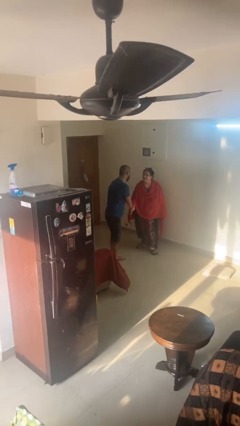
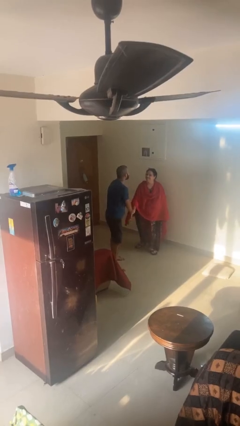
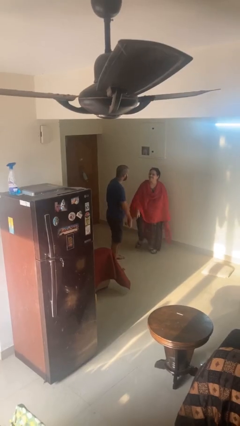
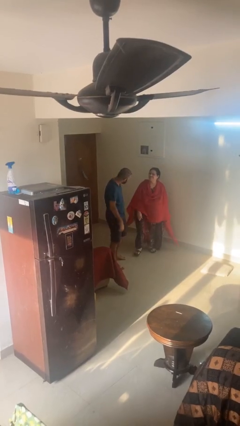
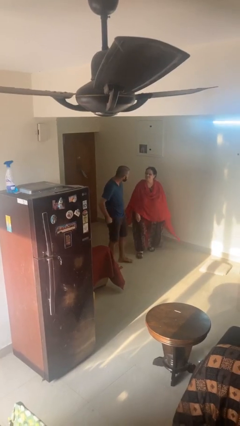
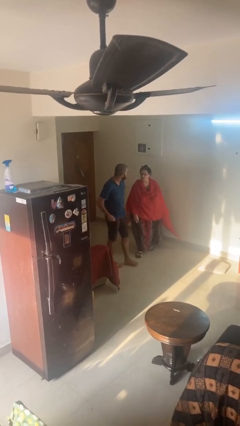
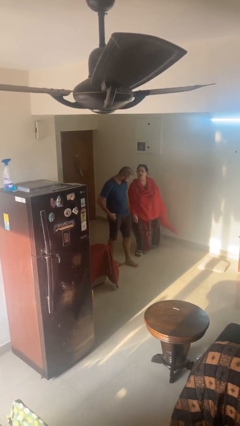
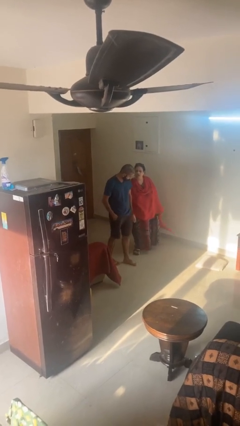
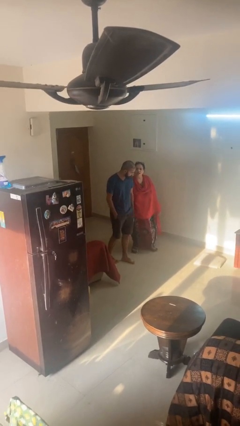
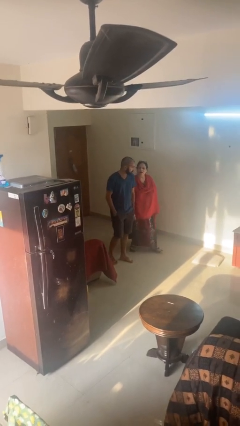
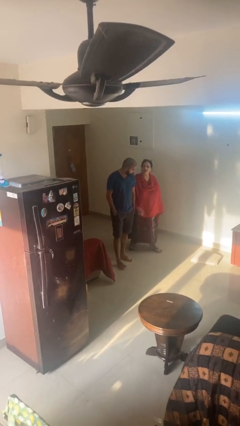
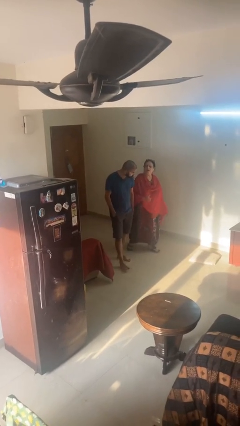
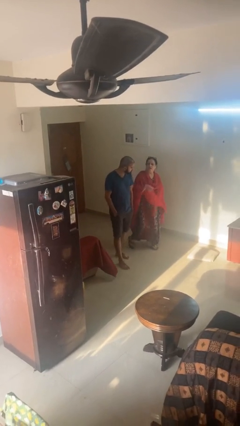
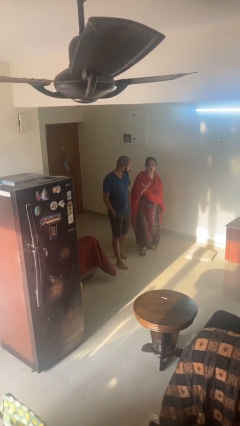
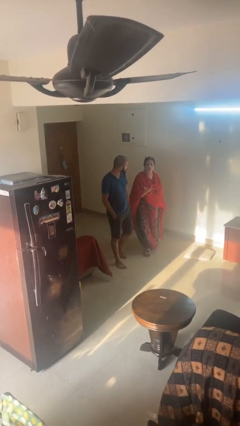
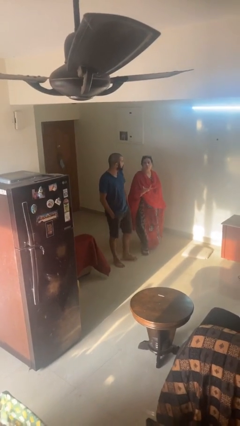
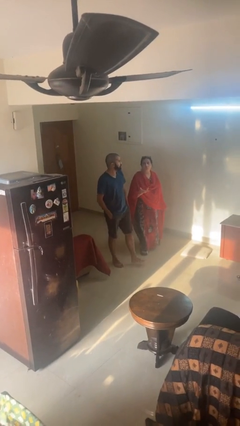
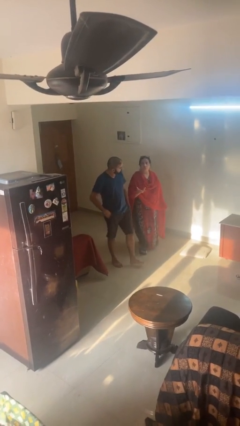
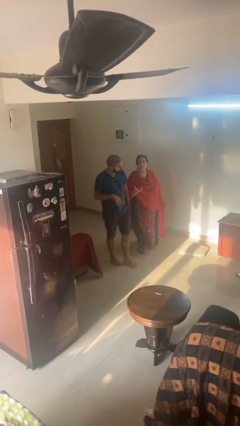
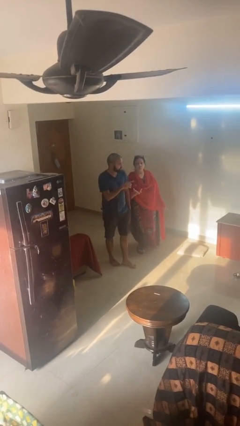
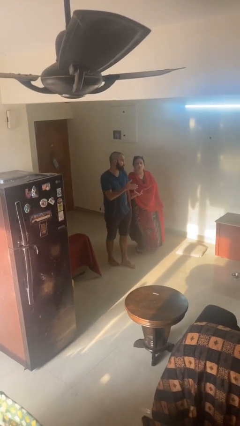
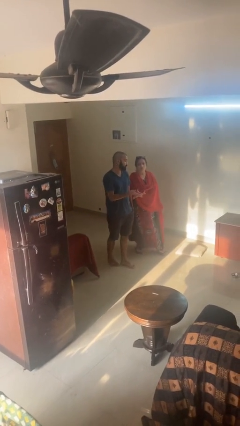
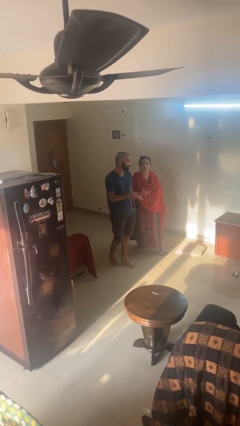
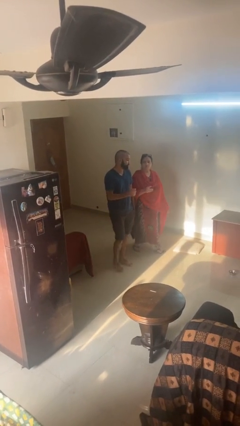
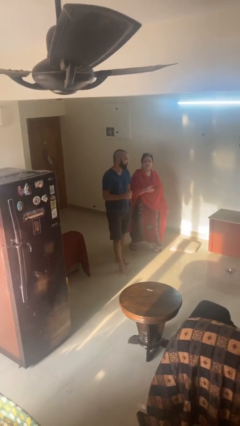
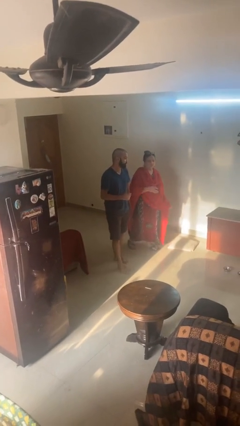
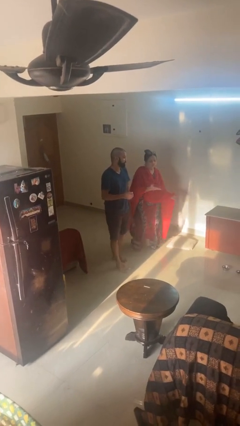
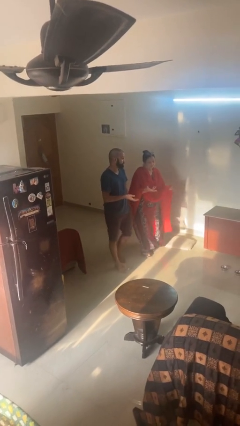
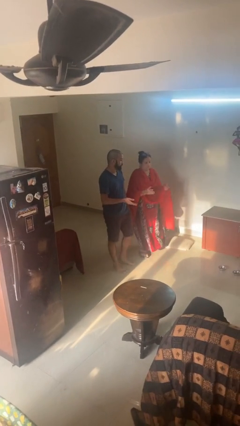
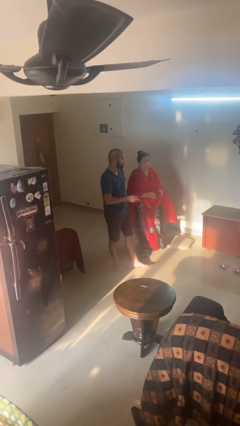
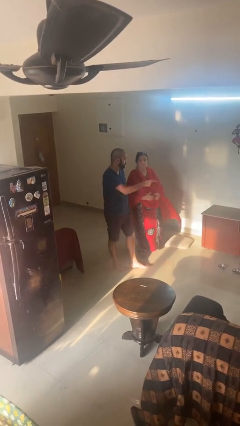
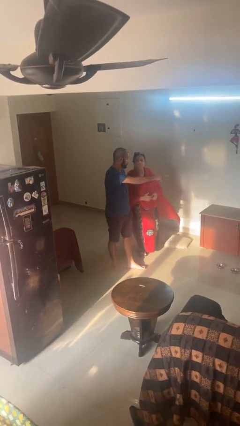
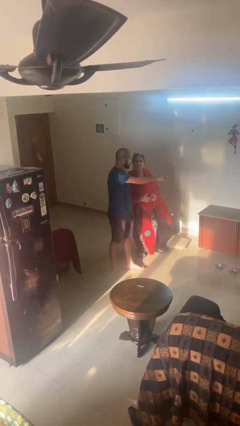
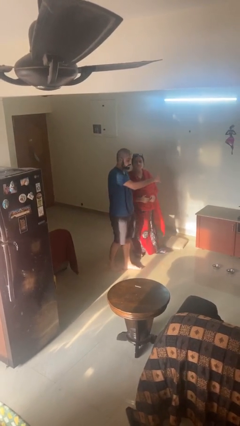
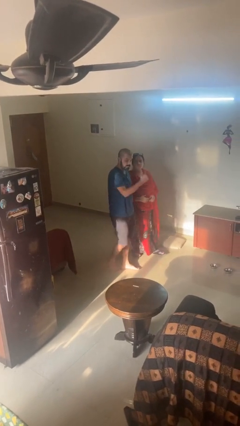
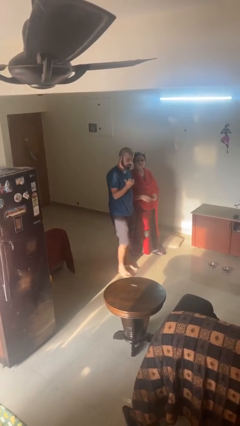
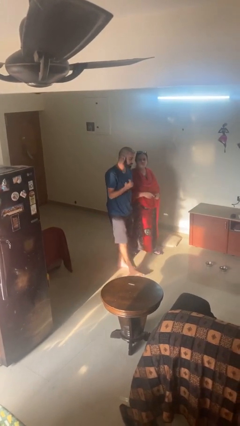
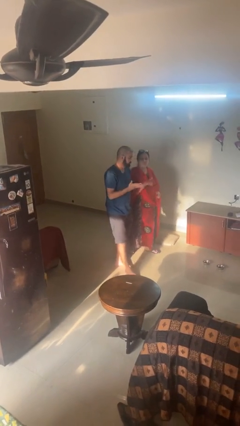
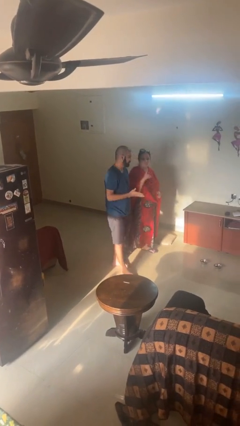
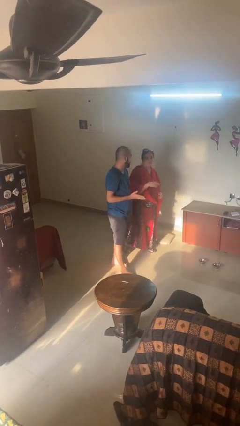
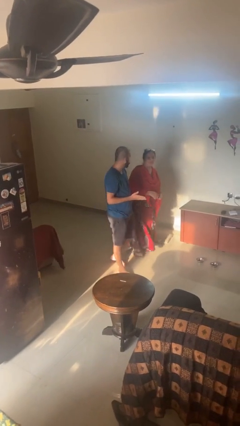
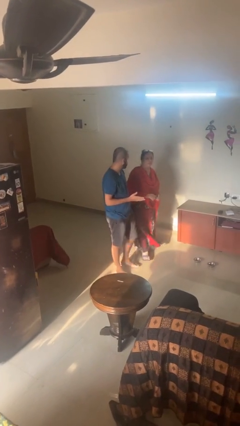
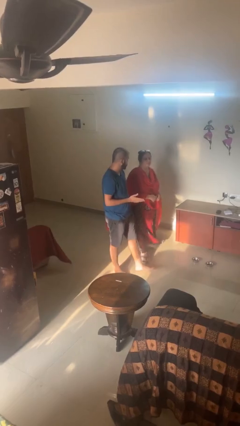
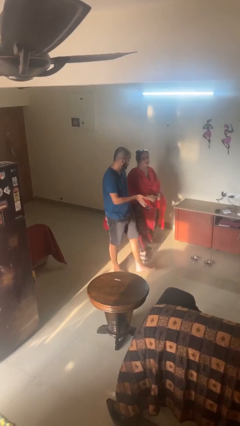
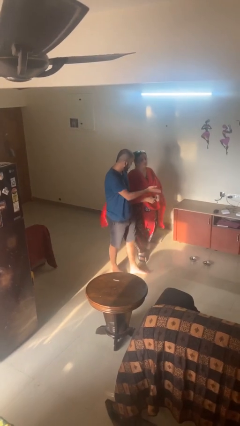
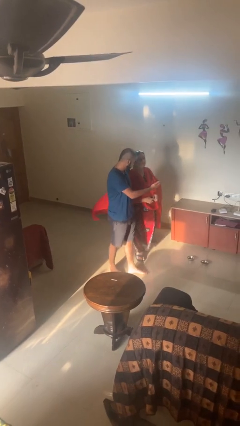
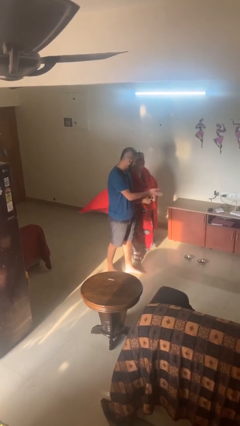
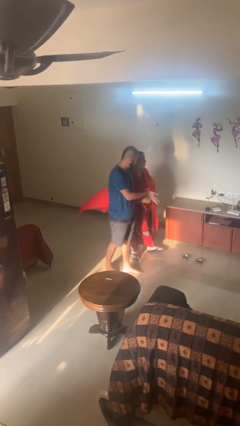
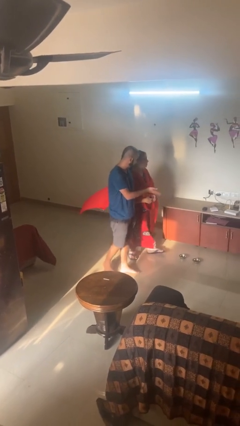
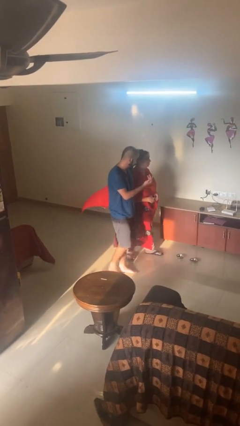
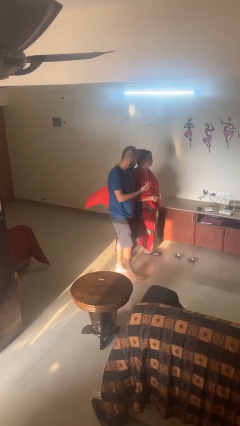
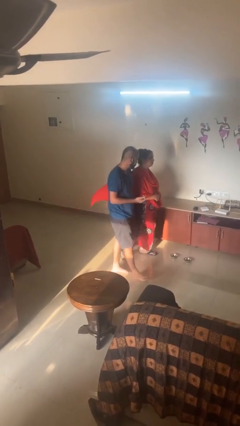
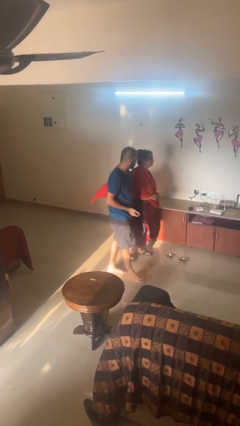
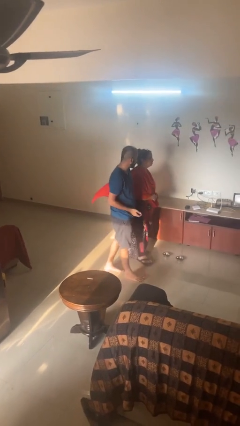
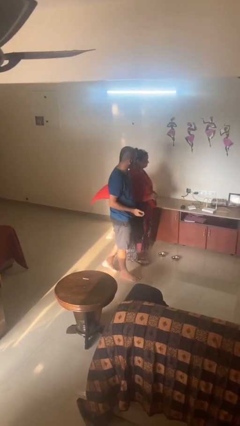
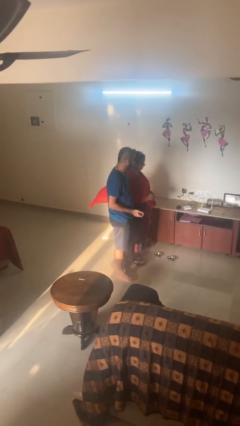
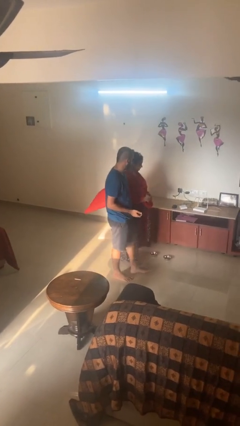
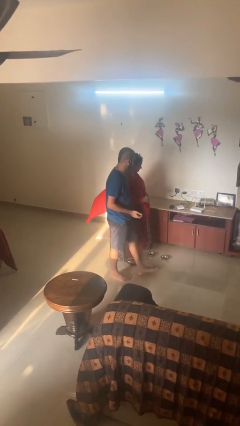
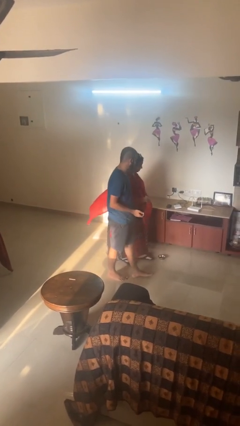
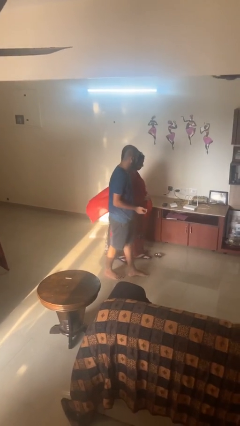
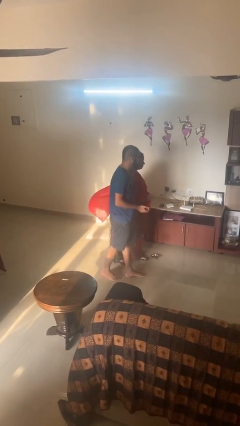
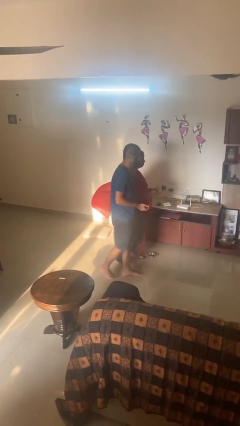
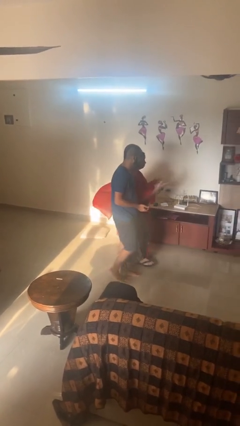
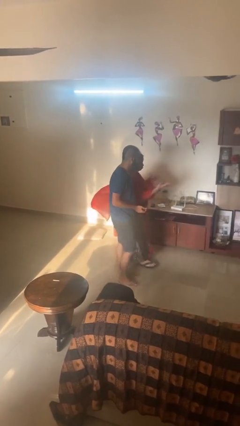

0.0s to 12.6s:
person talks to person

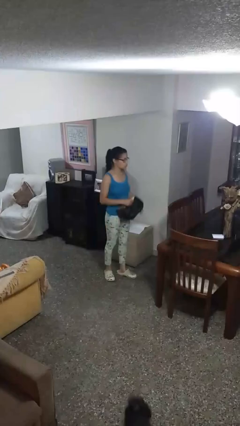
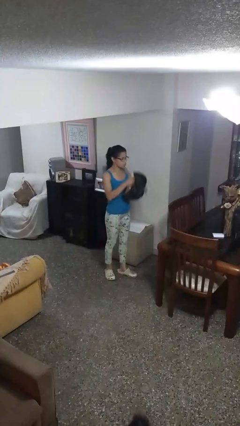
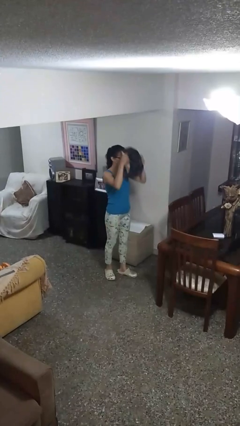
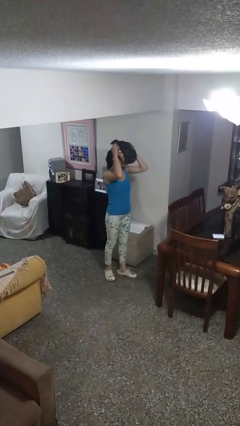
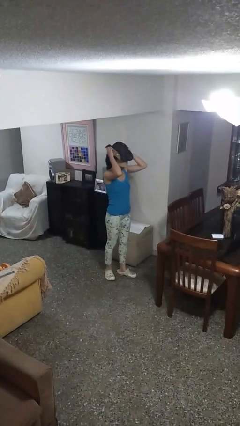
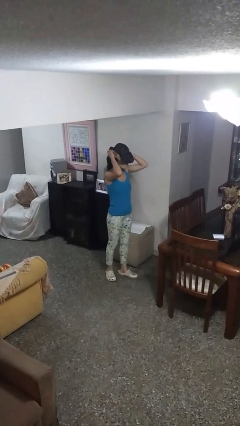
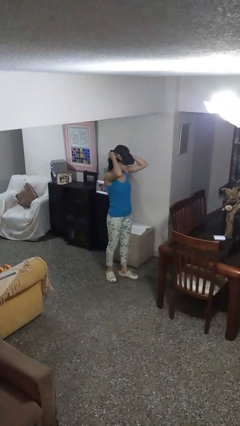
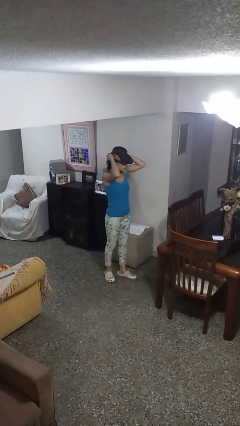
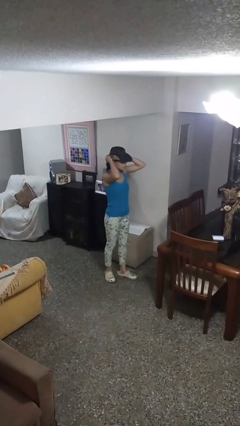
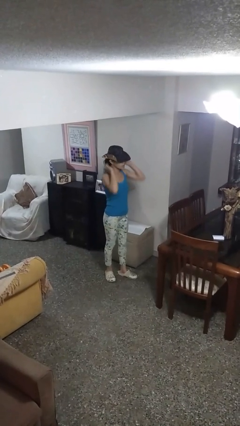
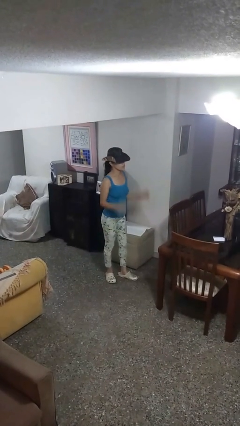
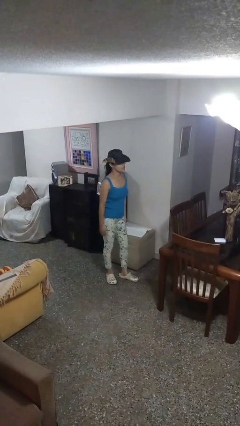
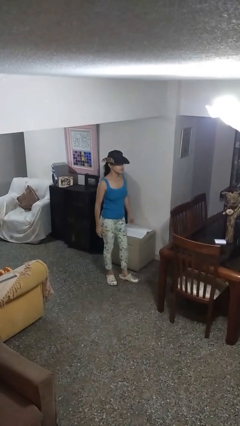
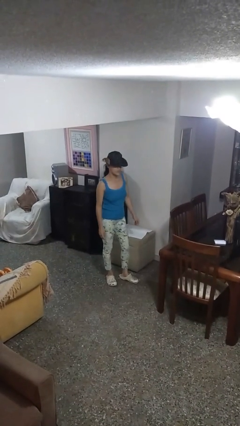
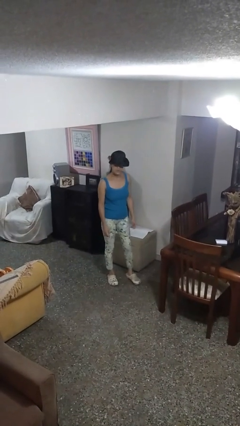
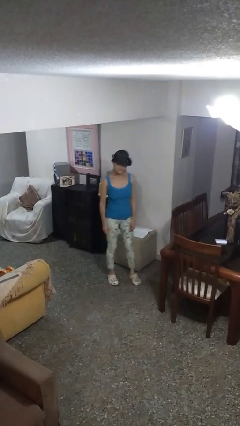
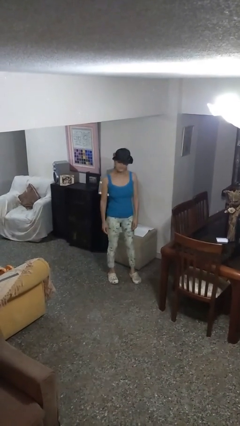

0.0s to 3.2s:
person puts on hat

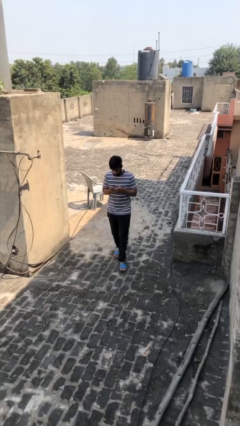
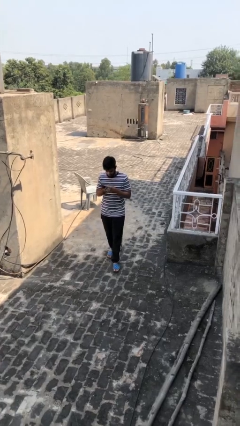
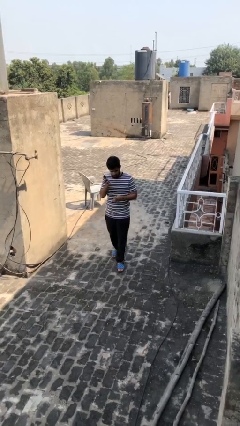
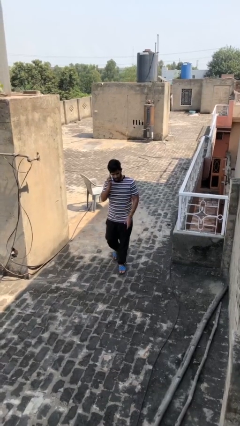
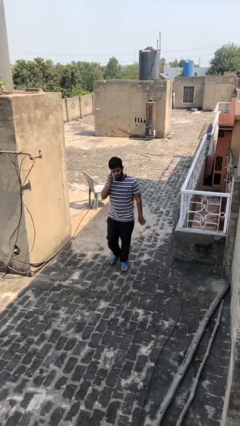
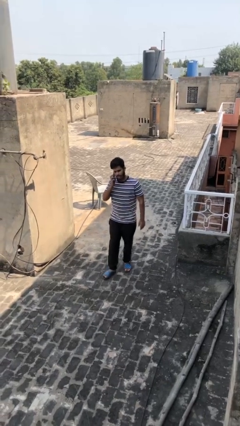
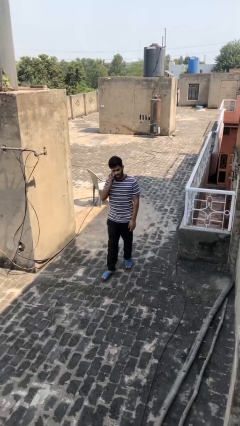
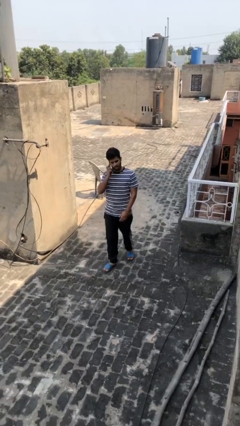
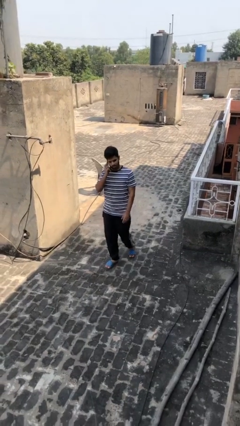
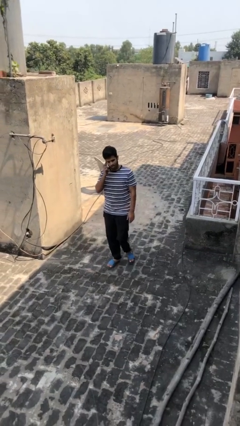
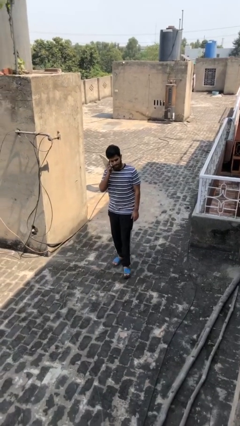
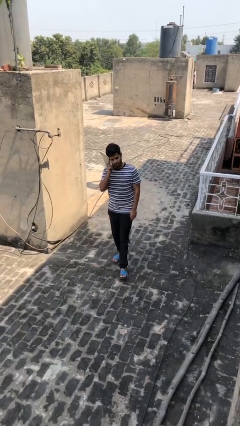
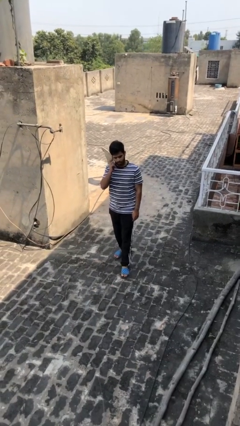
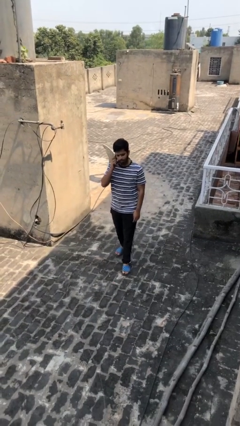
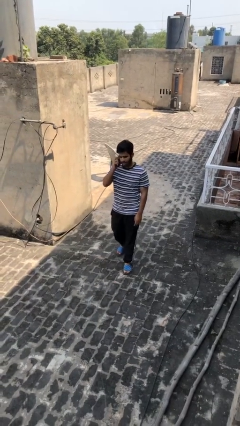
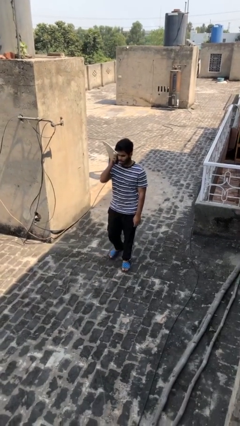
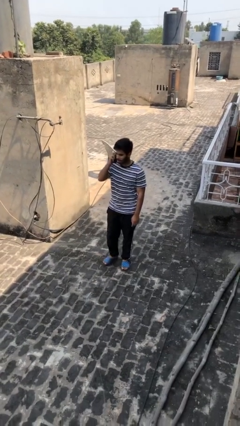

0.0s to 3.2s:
person talks on phone
